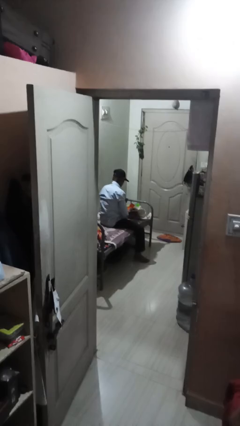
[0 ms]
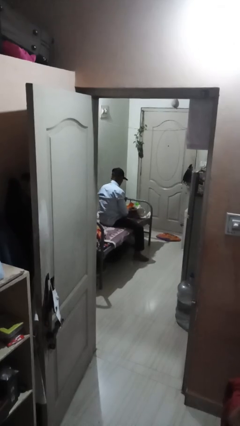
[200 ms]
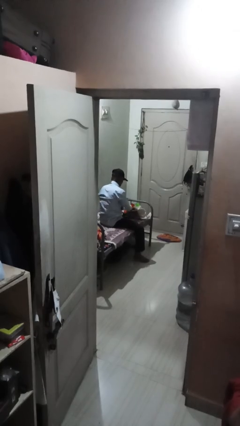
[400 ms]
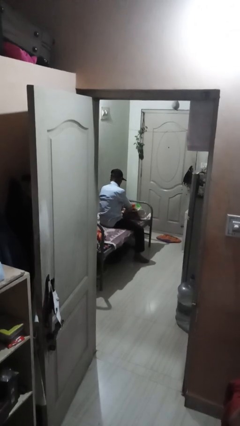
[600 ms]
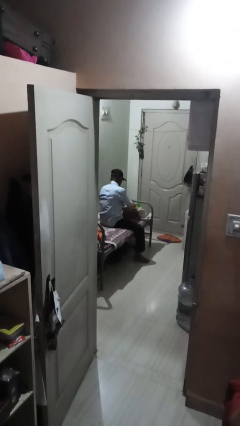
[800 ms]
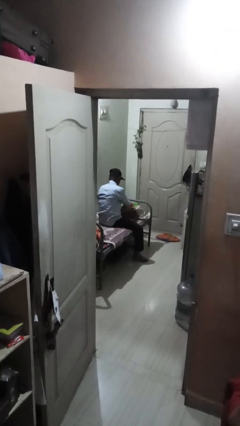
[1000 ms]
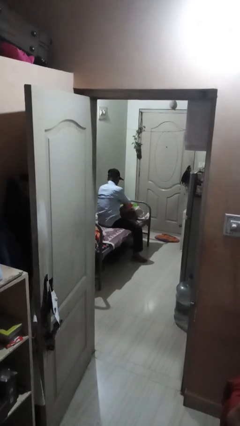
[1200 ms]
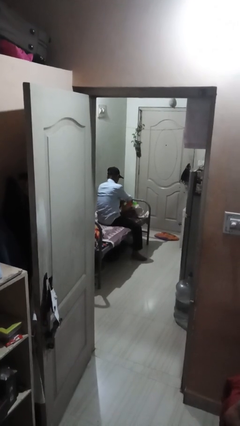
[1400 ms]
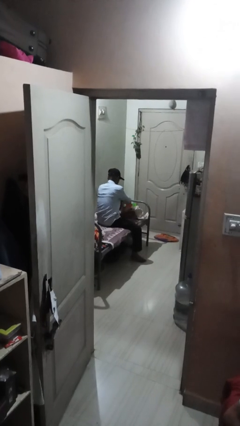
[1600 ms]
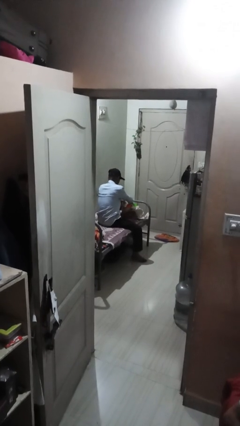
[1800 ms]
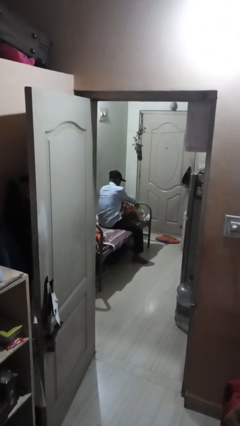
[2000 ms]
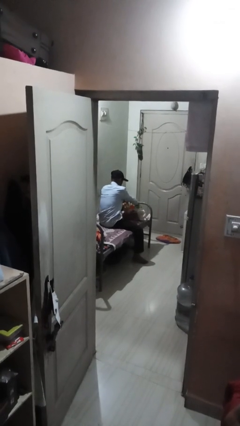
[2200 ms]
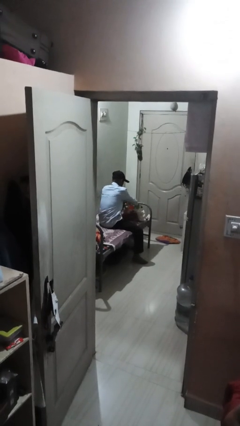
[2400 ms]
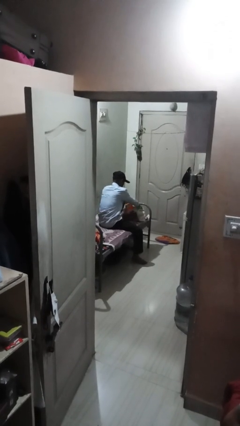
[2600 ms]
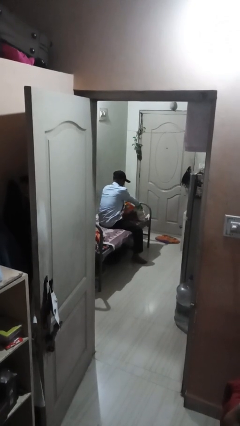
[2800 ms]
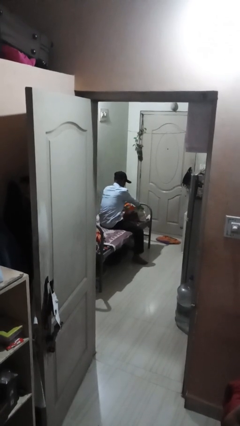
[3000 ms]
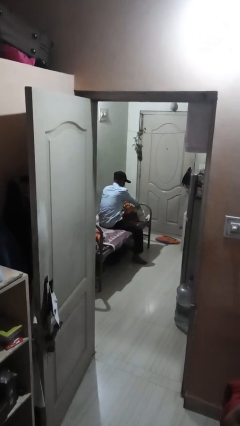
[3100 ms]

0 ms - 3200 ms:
person searches in bag

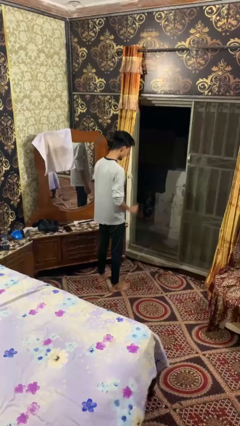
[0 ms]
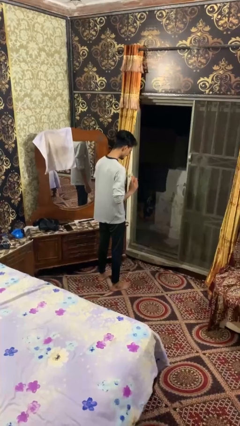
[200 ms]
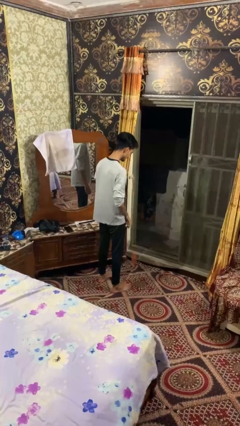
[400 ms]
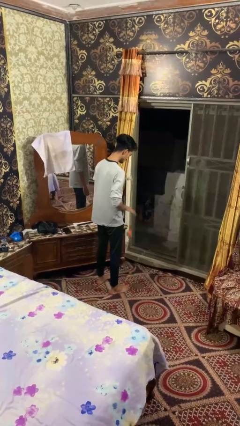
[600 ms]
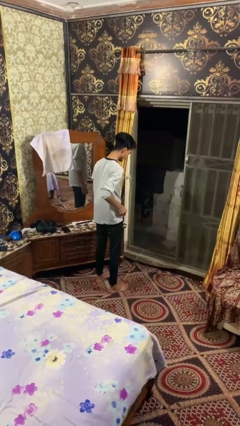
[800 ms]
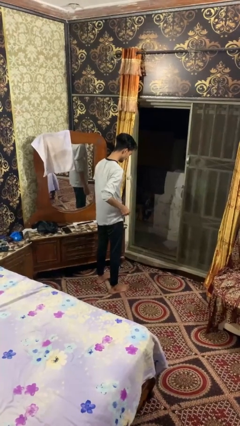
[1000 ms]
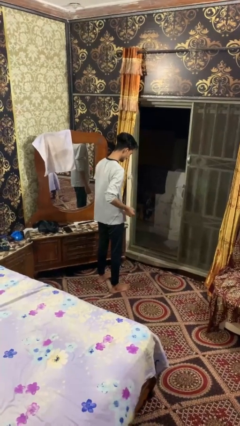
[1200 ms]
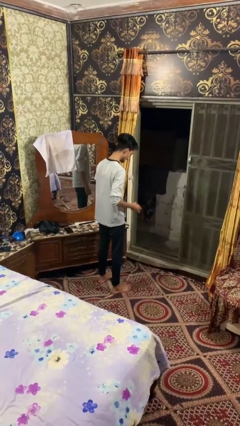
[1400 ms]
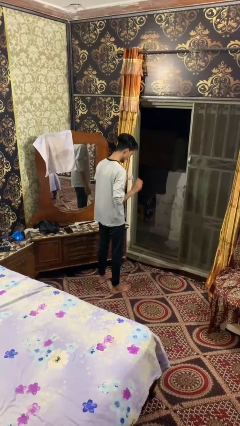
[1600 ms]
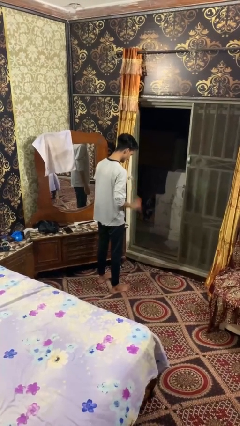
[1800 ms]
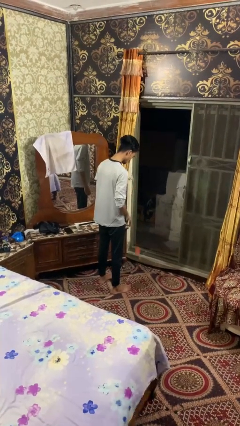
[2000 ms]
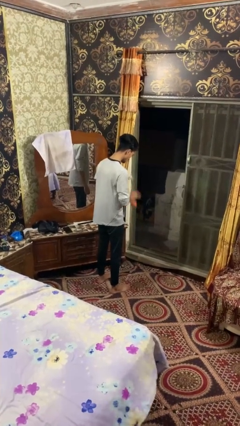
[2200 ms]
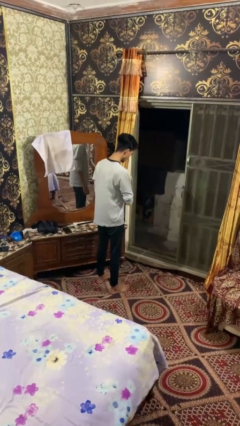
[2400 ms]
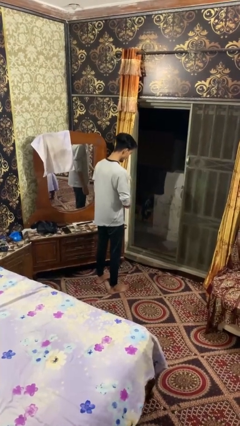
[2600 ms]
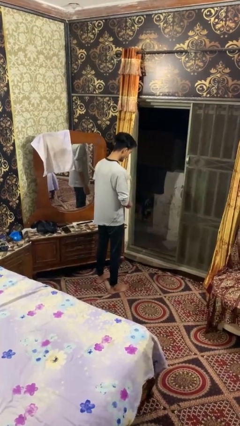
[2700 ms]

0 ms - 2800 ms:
person bounces ball on floor

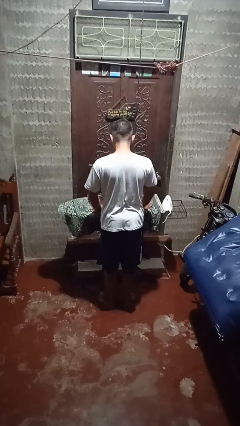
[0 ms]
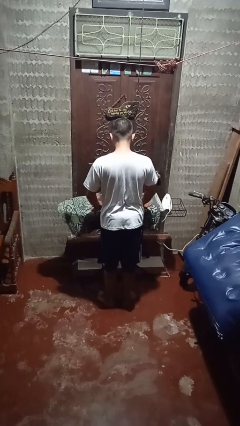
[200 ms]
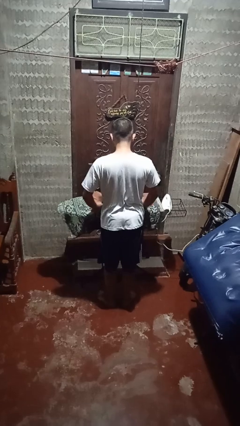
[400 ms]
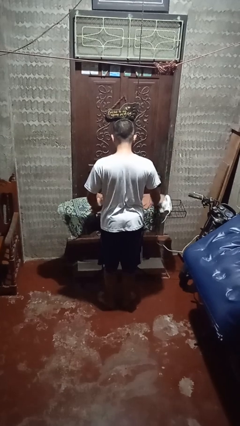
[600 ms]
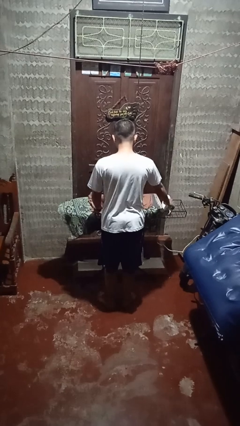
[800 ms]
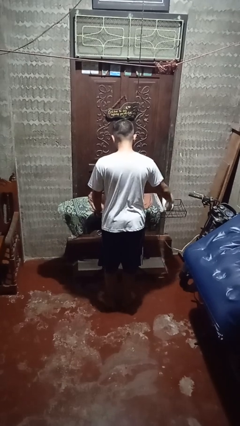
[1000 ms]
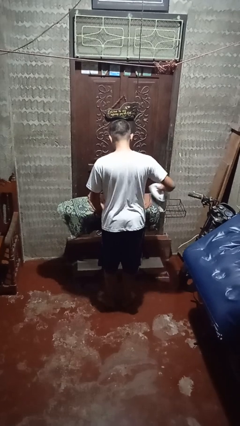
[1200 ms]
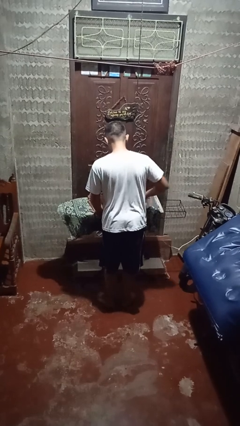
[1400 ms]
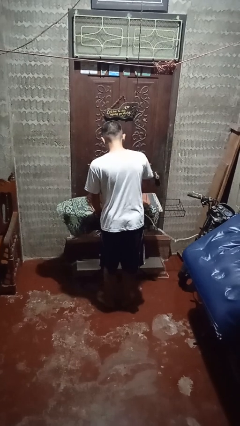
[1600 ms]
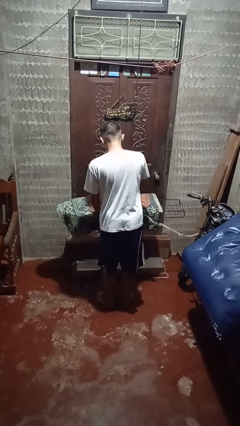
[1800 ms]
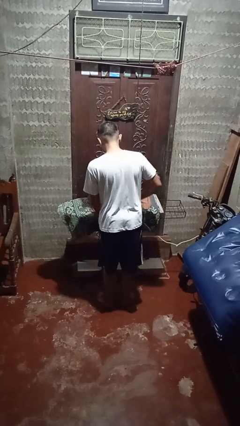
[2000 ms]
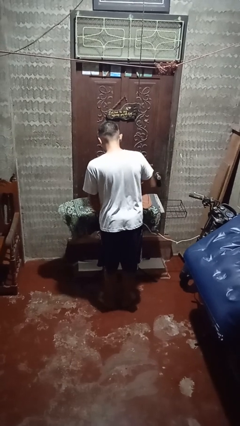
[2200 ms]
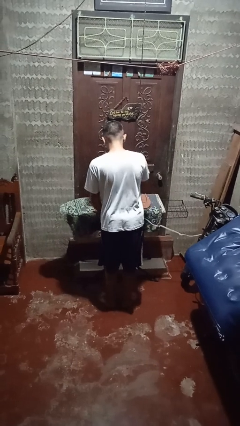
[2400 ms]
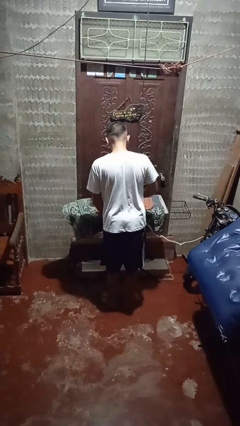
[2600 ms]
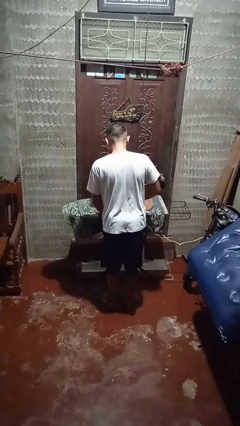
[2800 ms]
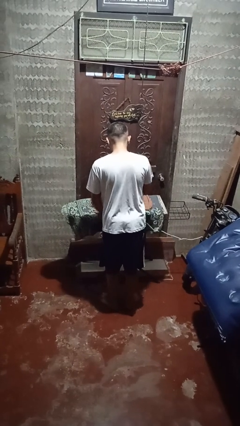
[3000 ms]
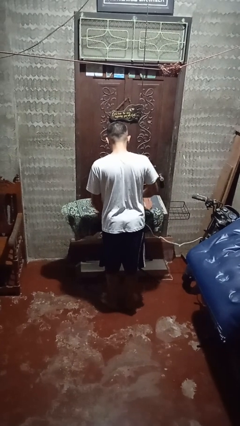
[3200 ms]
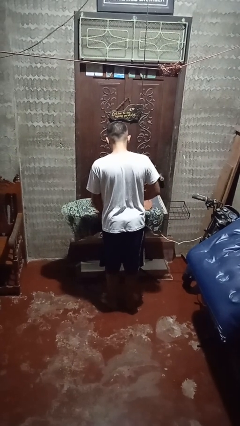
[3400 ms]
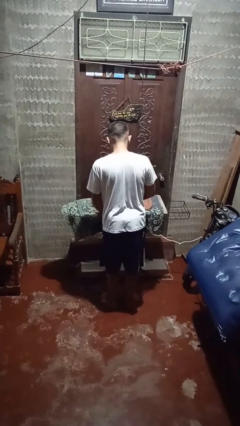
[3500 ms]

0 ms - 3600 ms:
person irons clothes

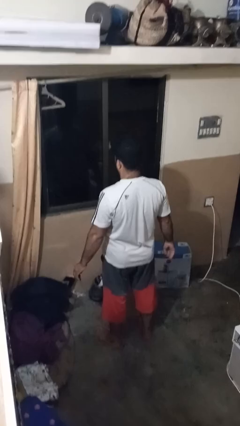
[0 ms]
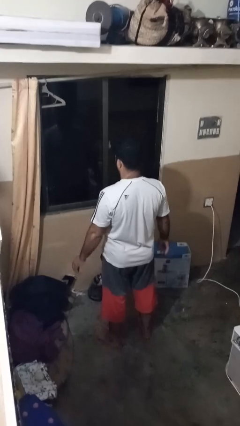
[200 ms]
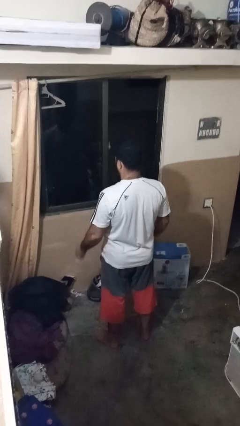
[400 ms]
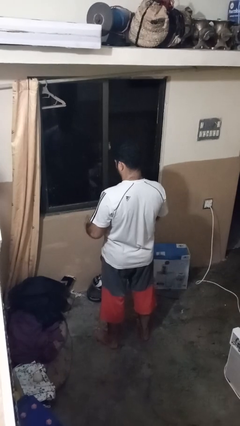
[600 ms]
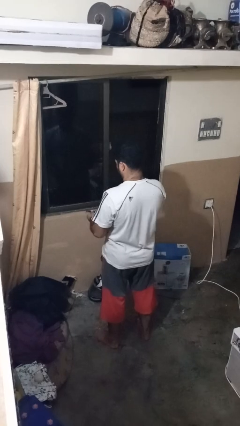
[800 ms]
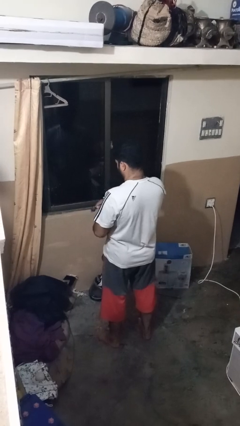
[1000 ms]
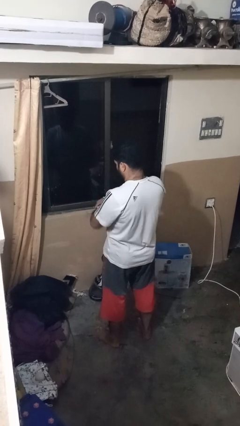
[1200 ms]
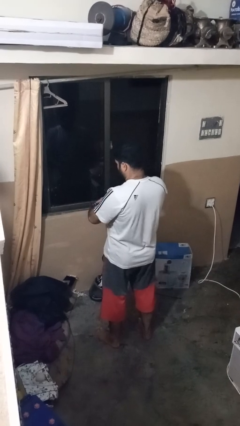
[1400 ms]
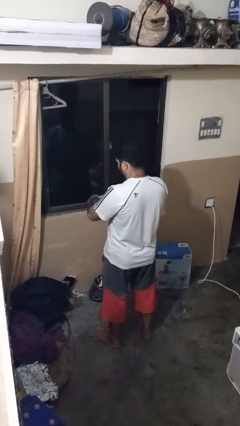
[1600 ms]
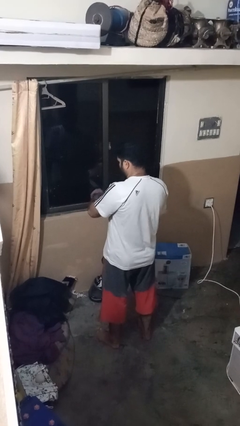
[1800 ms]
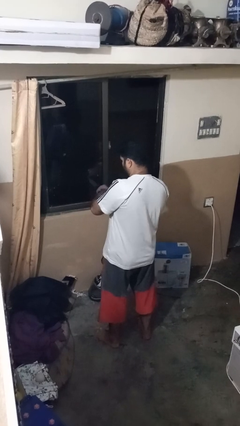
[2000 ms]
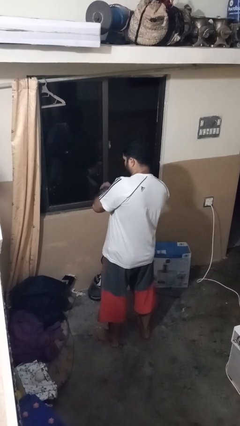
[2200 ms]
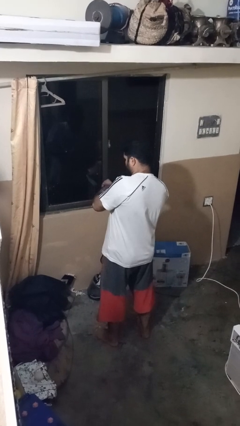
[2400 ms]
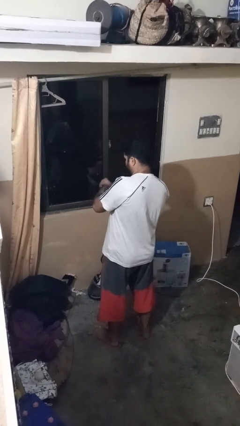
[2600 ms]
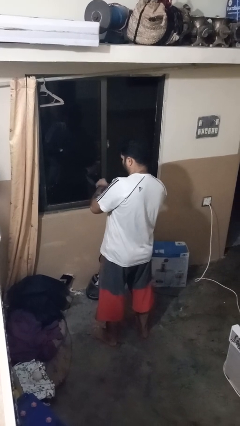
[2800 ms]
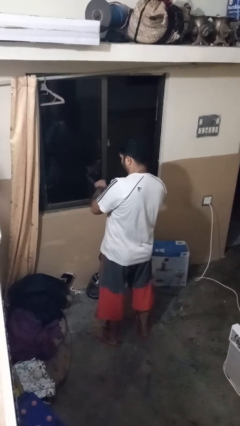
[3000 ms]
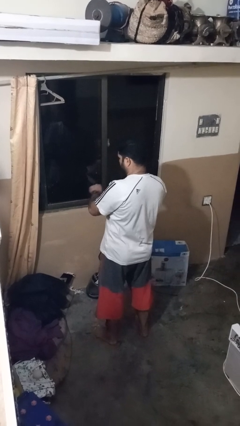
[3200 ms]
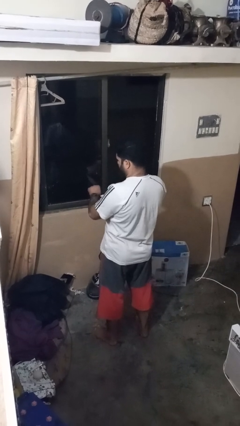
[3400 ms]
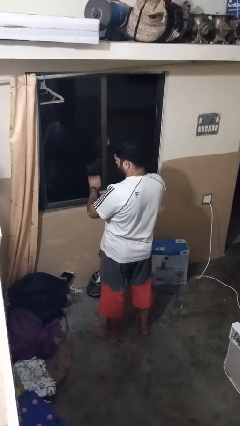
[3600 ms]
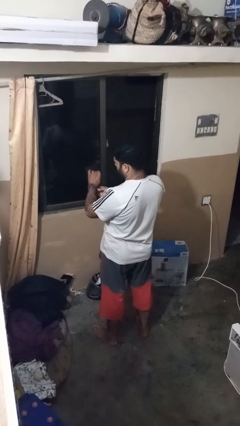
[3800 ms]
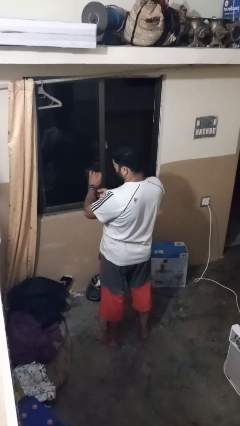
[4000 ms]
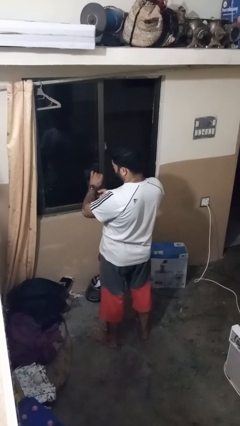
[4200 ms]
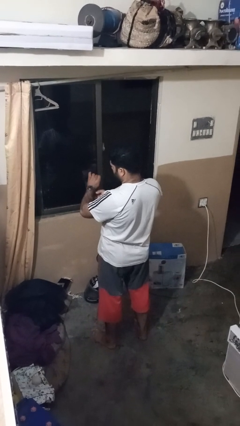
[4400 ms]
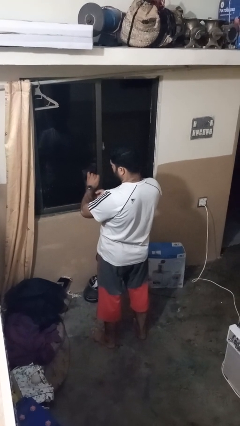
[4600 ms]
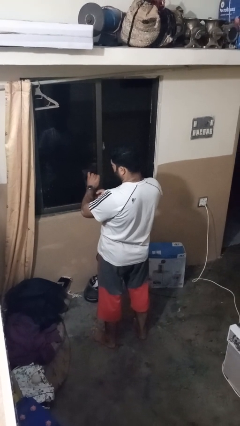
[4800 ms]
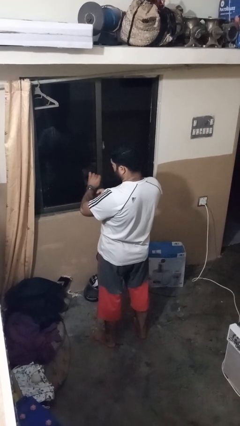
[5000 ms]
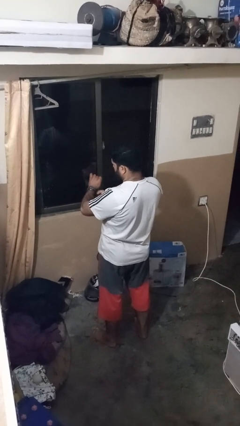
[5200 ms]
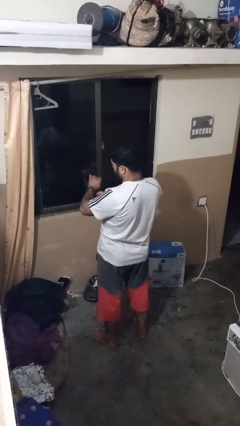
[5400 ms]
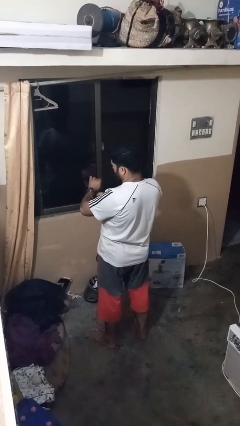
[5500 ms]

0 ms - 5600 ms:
person puts on wristwatch

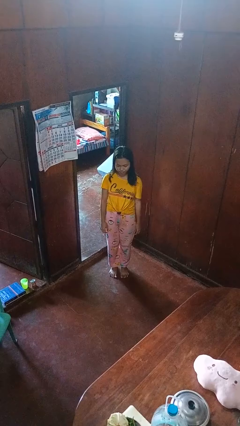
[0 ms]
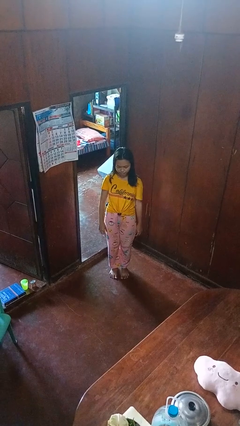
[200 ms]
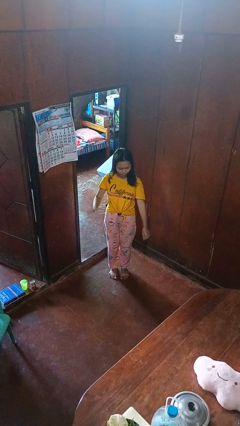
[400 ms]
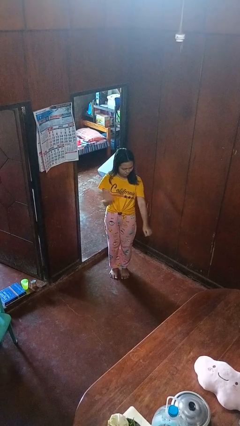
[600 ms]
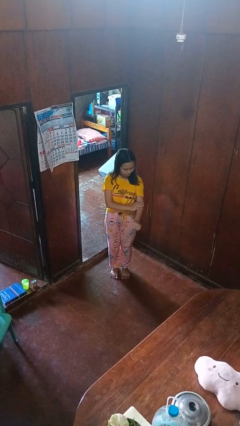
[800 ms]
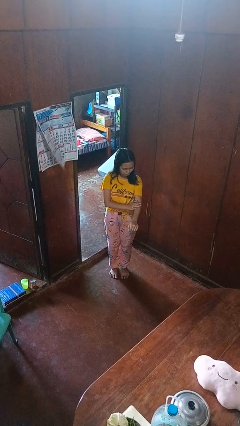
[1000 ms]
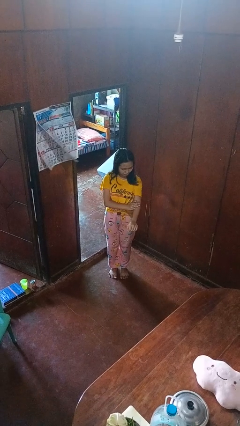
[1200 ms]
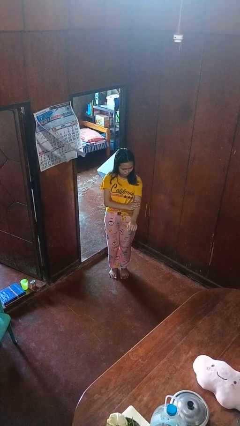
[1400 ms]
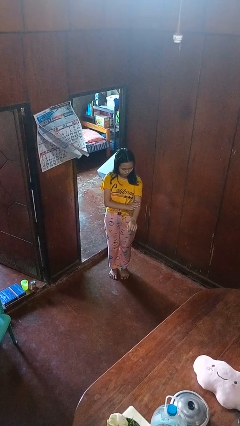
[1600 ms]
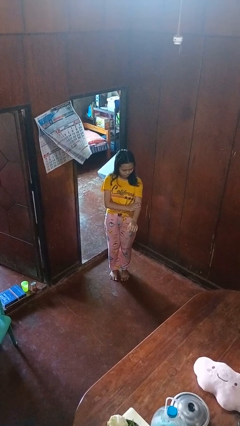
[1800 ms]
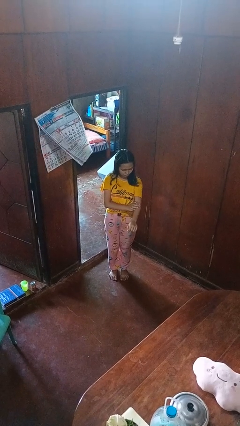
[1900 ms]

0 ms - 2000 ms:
person swats bug

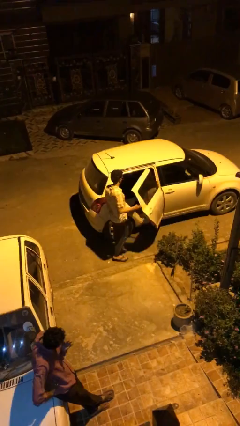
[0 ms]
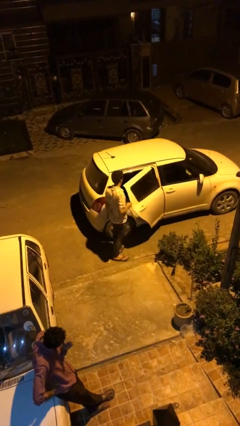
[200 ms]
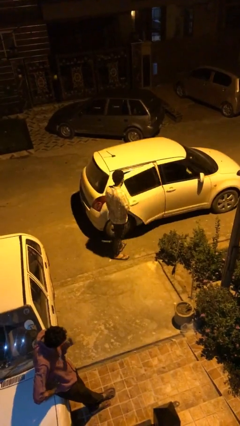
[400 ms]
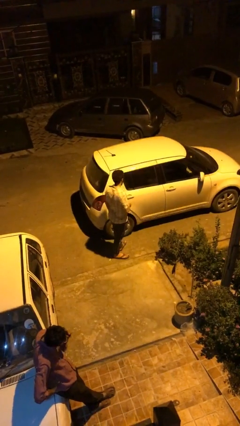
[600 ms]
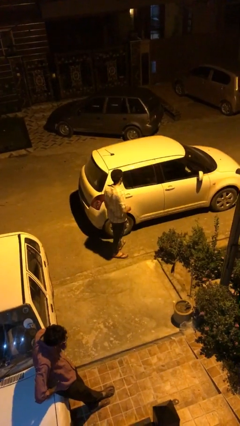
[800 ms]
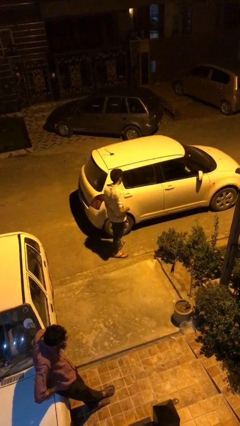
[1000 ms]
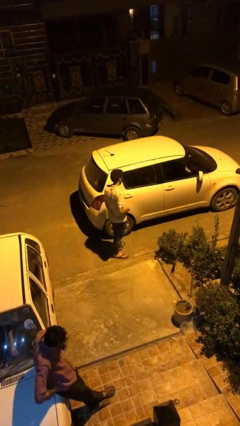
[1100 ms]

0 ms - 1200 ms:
person closes car door
